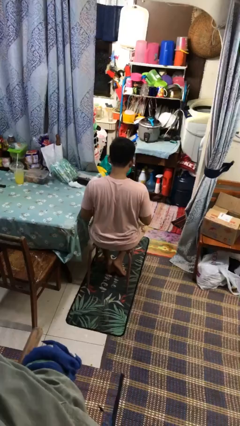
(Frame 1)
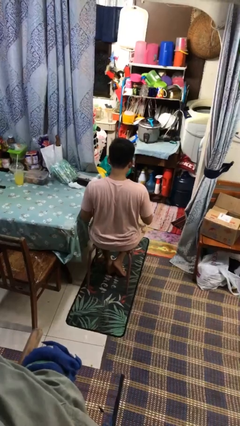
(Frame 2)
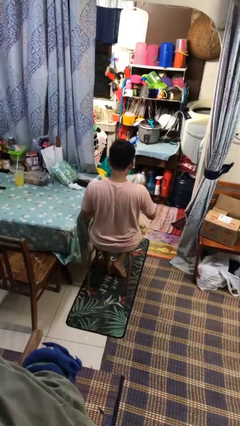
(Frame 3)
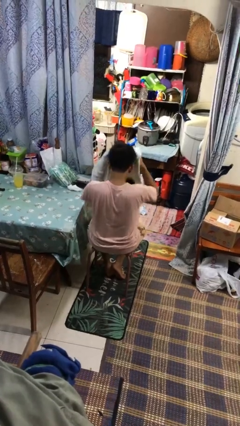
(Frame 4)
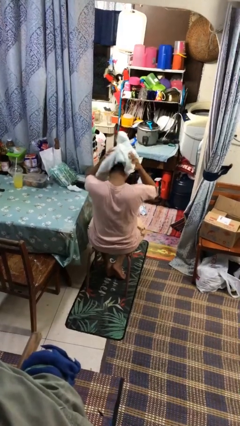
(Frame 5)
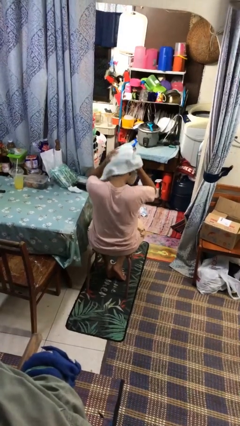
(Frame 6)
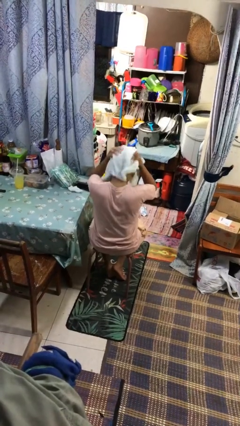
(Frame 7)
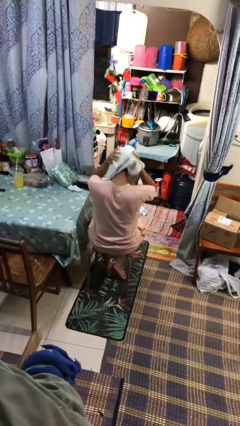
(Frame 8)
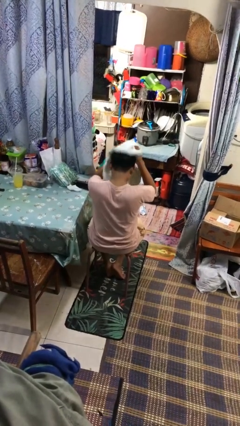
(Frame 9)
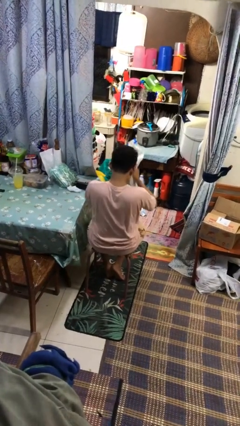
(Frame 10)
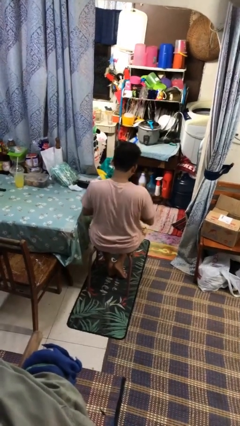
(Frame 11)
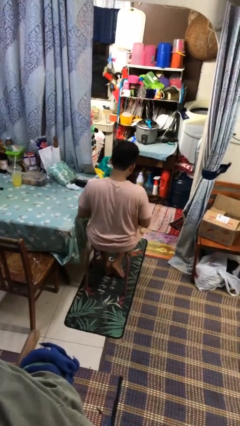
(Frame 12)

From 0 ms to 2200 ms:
person dries hair with towel

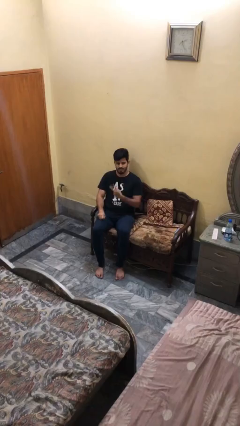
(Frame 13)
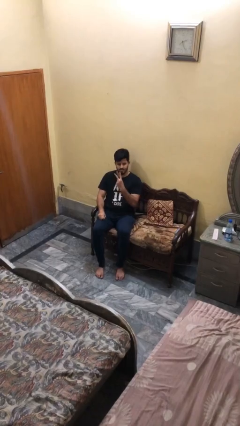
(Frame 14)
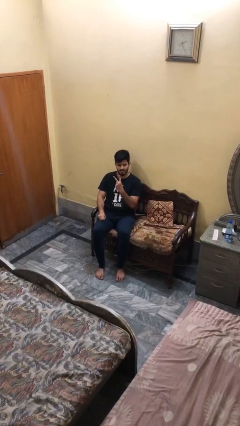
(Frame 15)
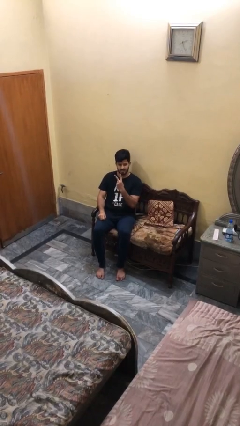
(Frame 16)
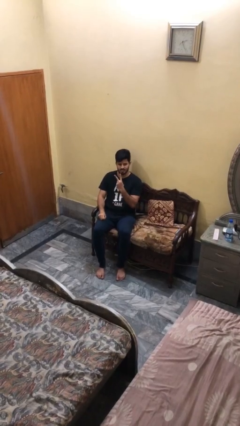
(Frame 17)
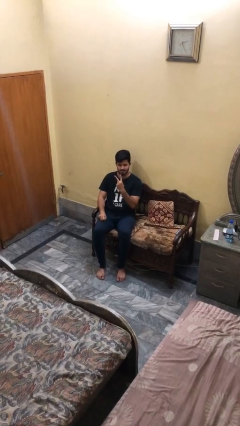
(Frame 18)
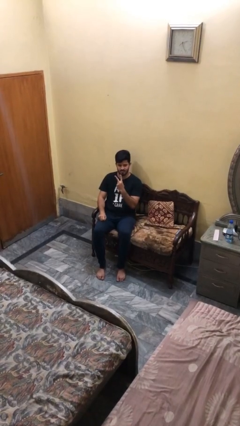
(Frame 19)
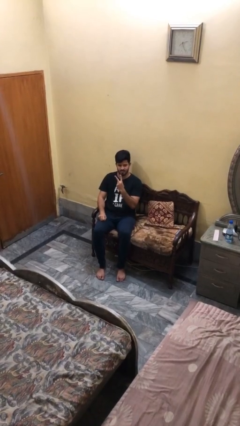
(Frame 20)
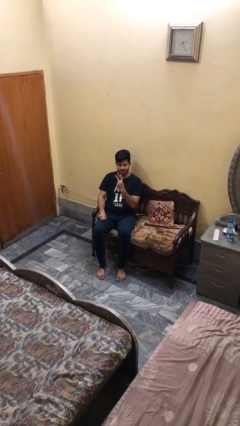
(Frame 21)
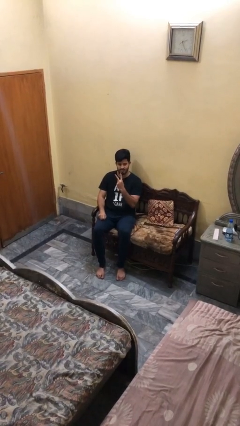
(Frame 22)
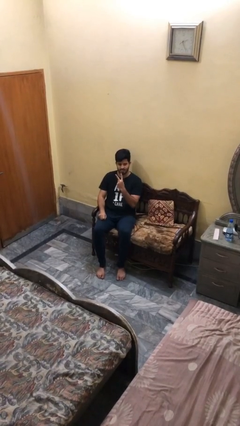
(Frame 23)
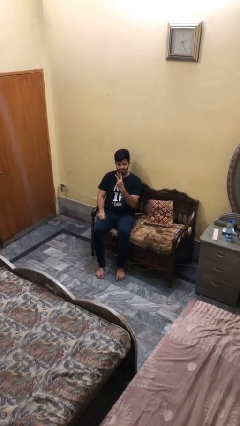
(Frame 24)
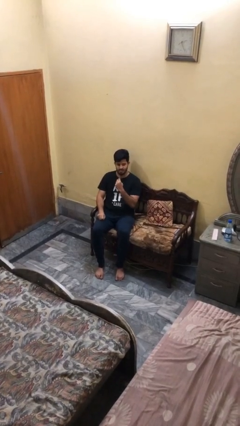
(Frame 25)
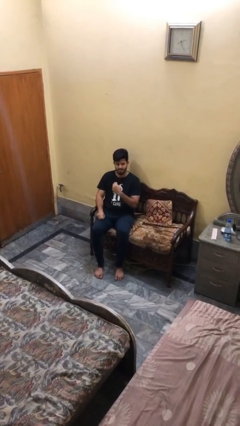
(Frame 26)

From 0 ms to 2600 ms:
person gestures peace

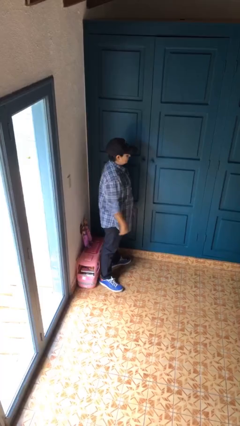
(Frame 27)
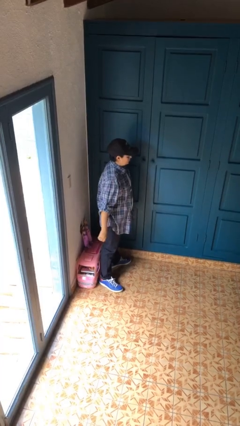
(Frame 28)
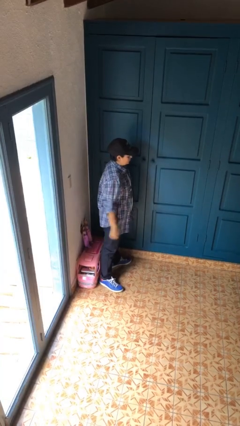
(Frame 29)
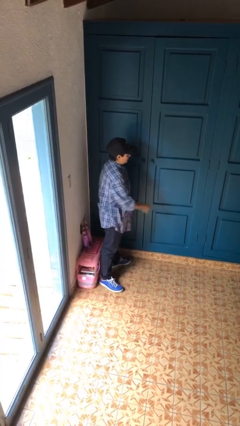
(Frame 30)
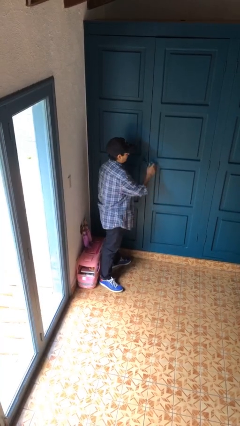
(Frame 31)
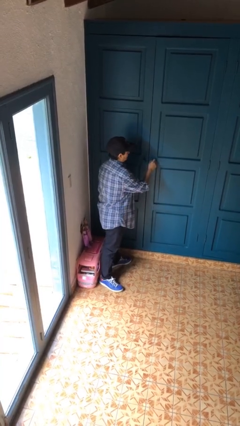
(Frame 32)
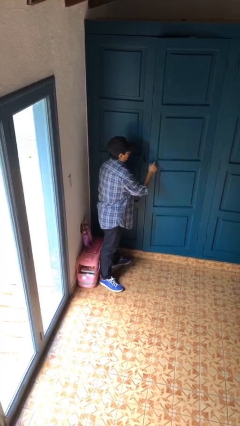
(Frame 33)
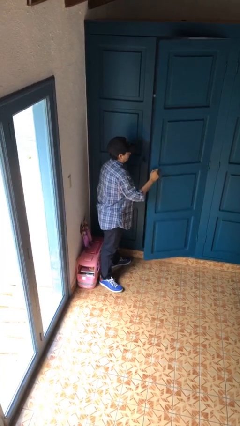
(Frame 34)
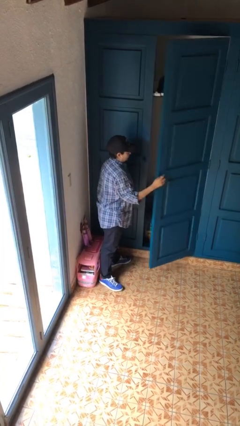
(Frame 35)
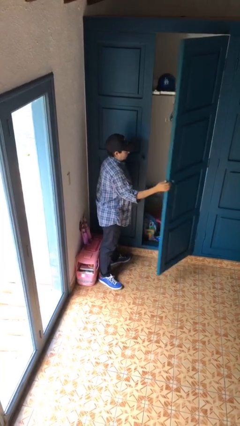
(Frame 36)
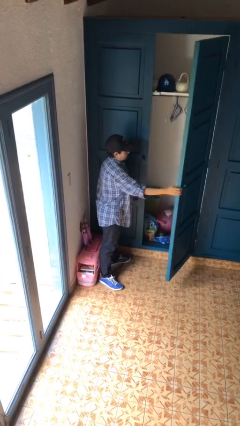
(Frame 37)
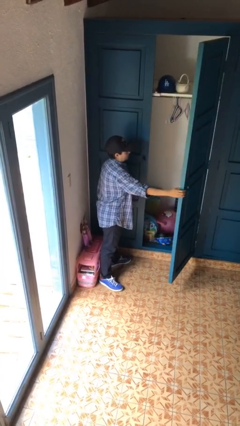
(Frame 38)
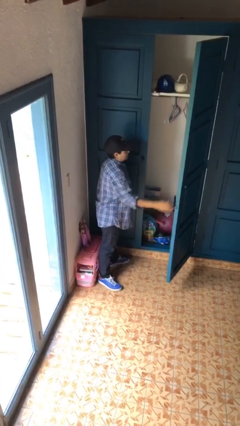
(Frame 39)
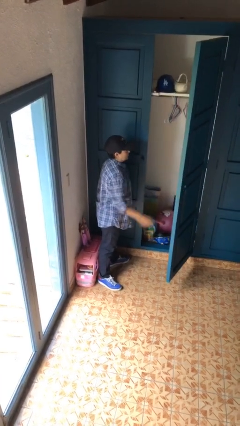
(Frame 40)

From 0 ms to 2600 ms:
person opens closet door

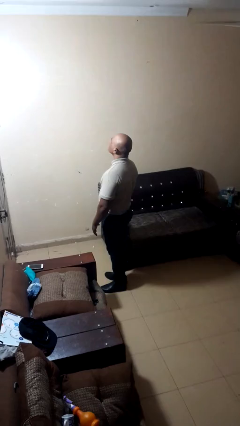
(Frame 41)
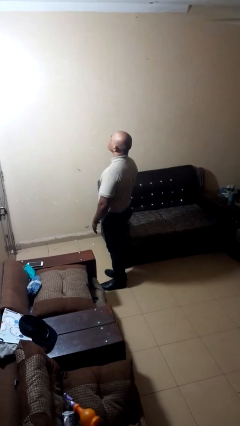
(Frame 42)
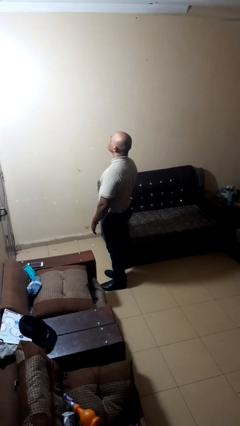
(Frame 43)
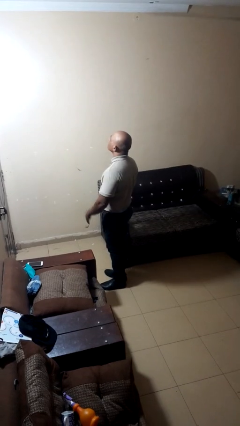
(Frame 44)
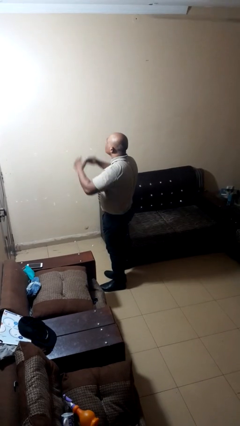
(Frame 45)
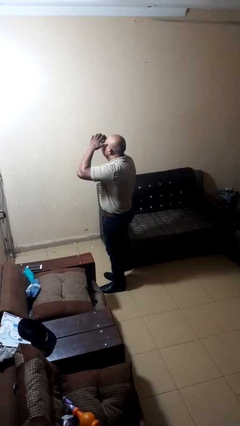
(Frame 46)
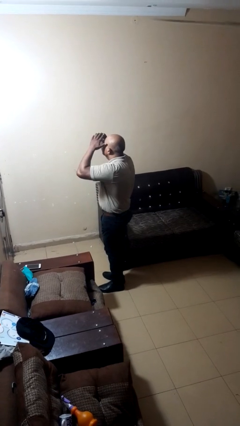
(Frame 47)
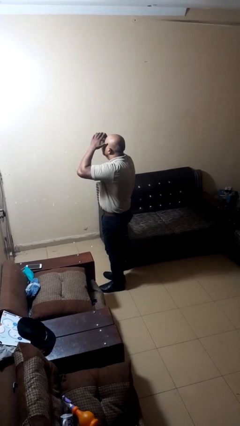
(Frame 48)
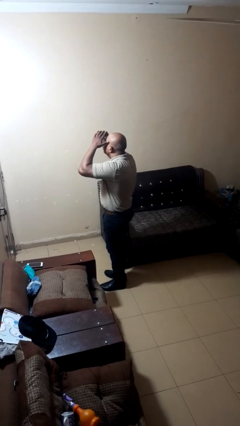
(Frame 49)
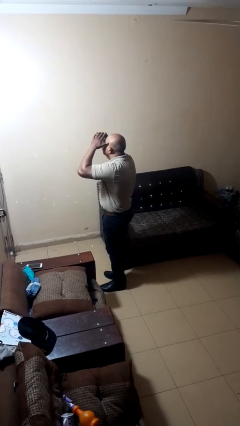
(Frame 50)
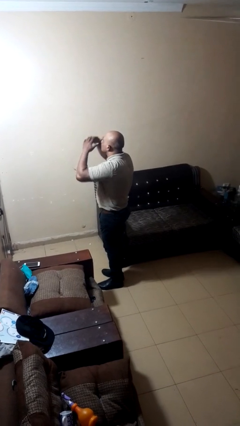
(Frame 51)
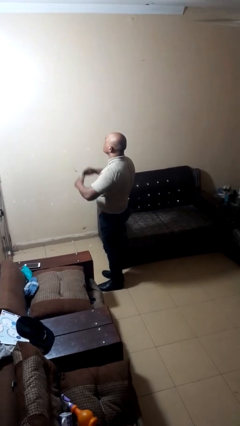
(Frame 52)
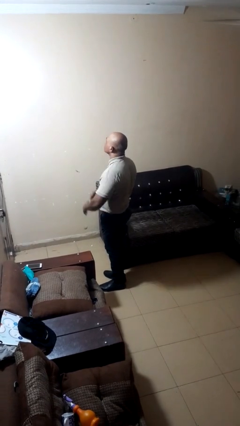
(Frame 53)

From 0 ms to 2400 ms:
person shades eyes

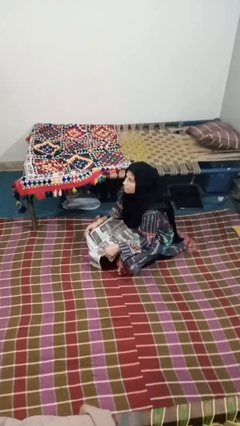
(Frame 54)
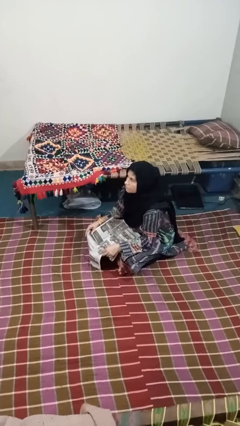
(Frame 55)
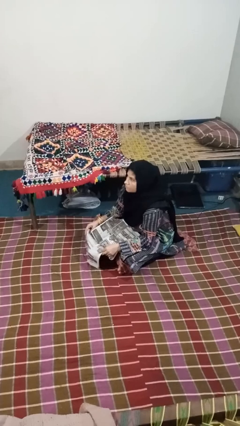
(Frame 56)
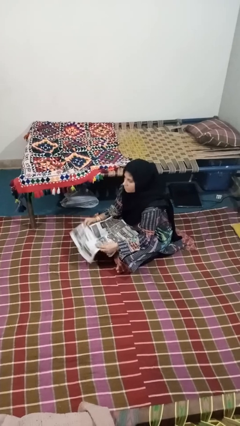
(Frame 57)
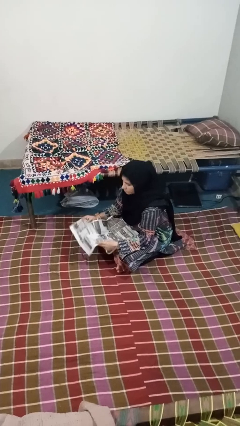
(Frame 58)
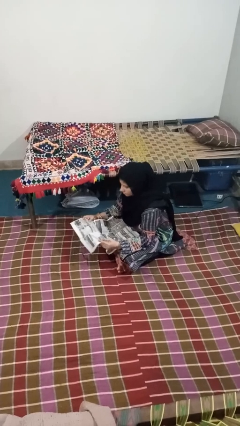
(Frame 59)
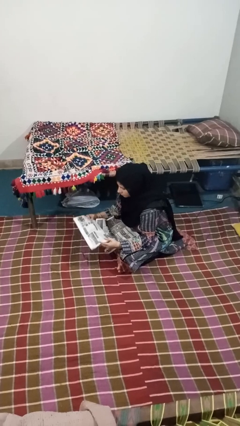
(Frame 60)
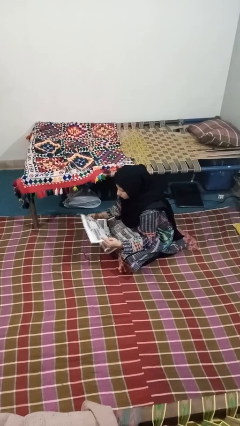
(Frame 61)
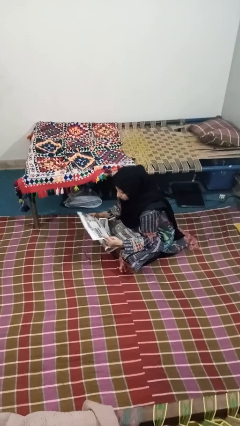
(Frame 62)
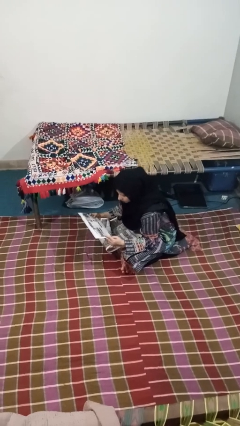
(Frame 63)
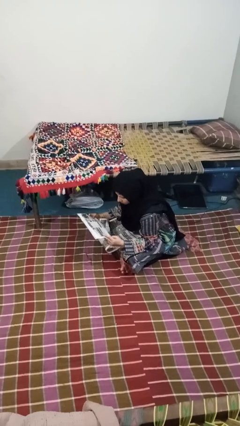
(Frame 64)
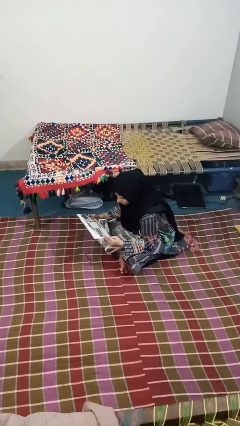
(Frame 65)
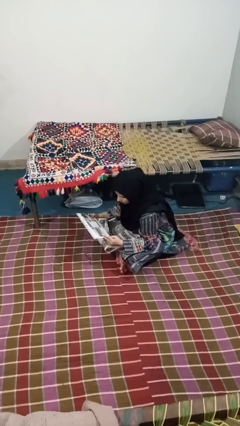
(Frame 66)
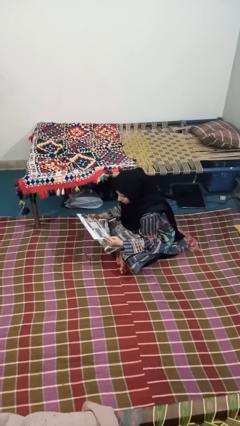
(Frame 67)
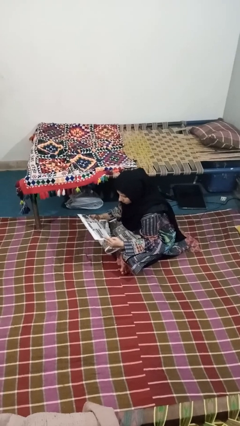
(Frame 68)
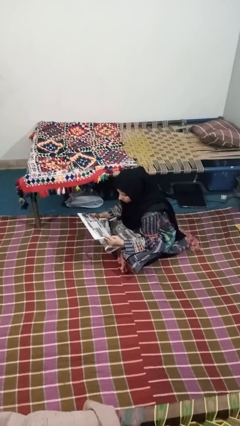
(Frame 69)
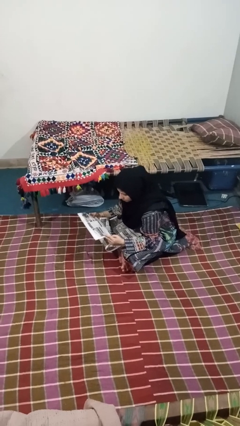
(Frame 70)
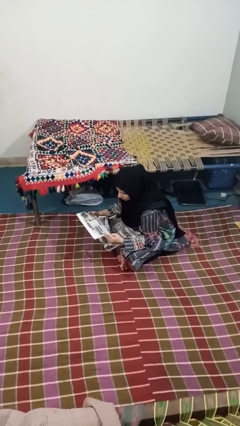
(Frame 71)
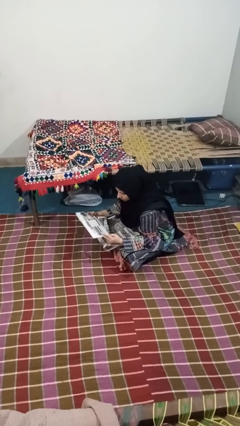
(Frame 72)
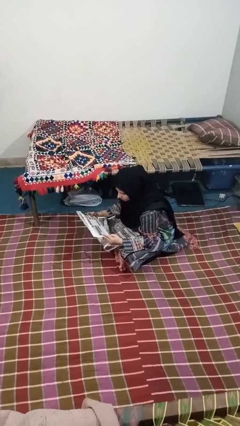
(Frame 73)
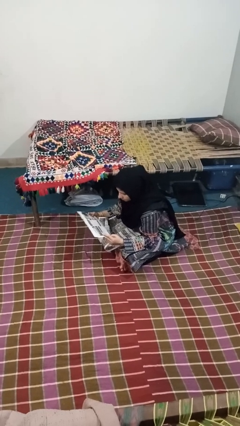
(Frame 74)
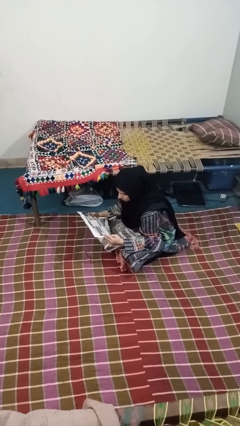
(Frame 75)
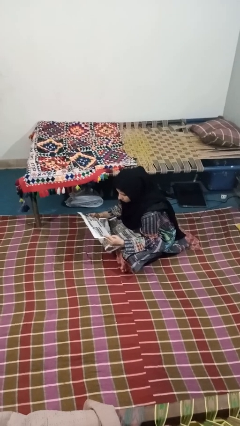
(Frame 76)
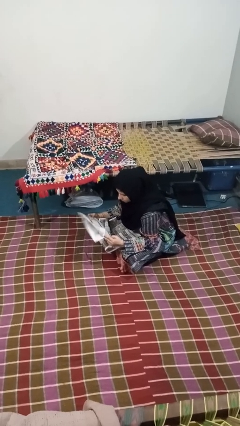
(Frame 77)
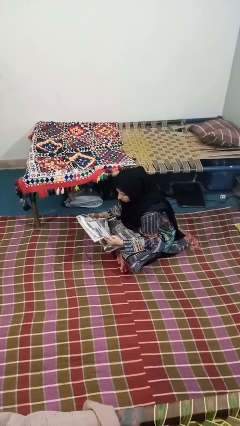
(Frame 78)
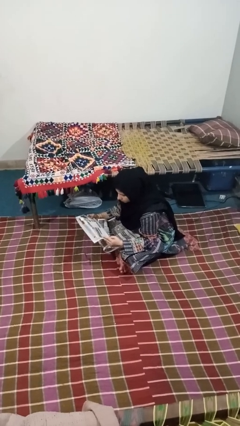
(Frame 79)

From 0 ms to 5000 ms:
person reads newspaper

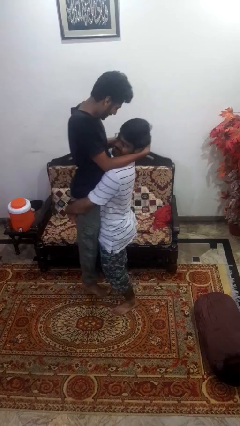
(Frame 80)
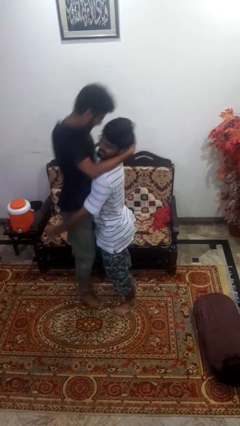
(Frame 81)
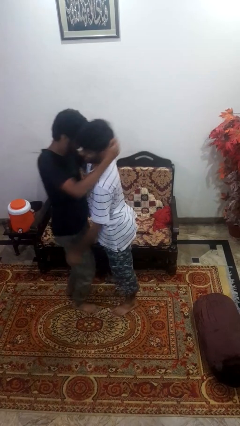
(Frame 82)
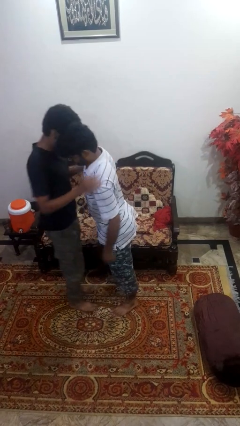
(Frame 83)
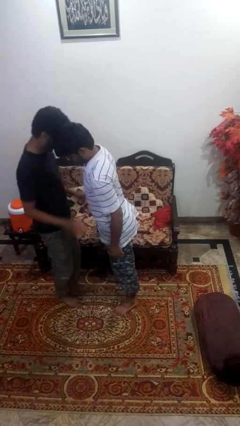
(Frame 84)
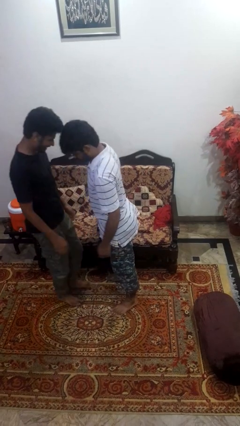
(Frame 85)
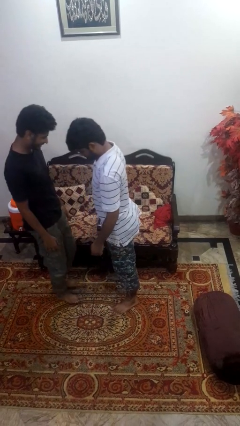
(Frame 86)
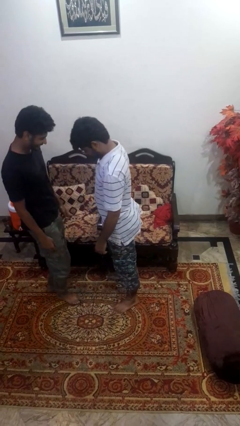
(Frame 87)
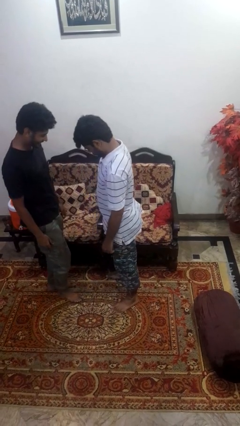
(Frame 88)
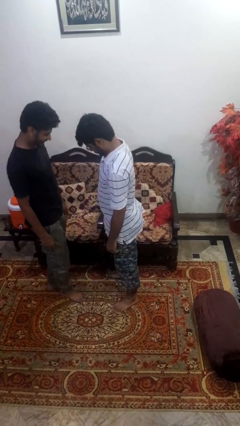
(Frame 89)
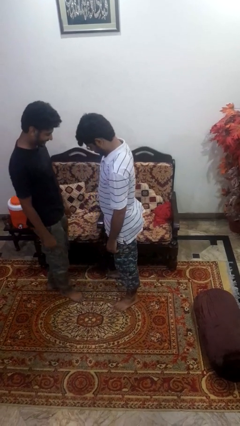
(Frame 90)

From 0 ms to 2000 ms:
person puts down person

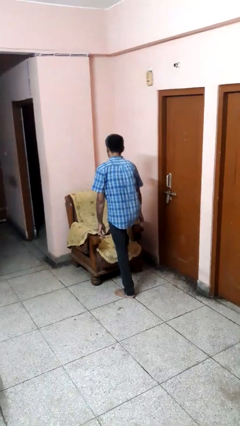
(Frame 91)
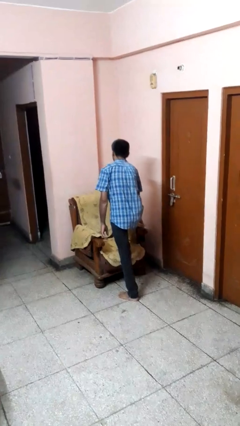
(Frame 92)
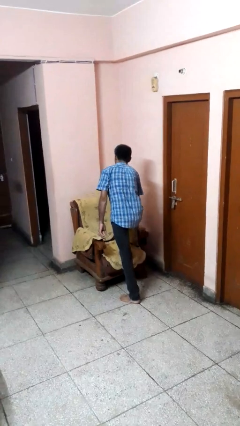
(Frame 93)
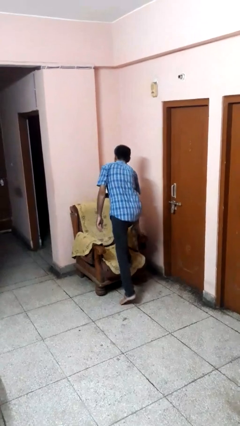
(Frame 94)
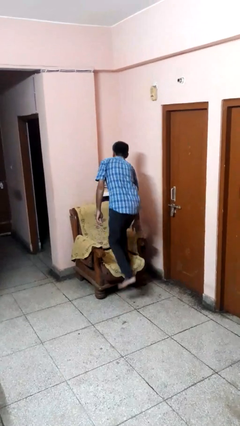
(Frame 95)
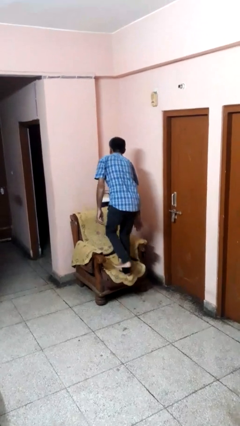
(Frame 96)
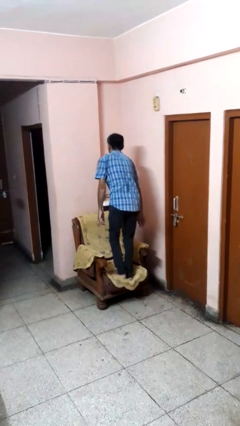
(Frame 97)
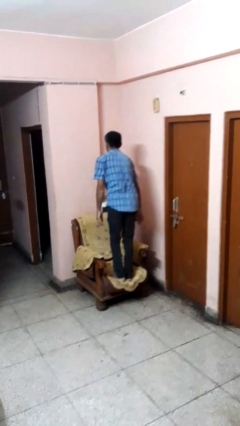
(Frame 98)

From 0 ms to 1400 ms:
person climbs on couch
